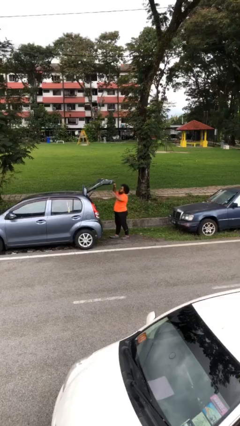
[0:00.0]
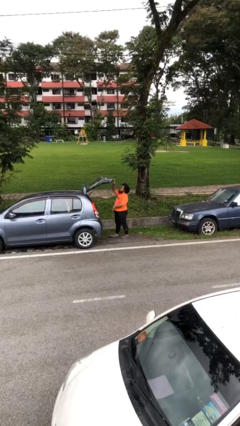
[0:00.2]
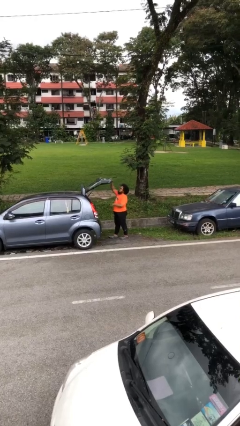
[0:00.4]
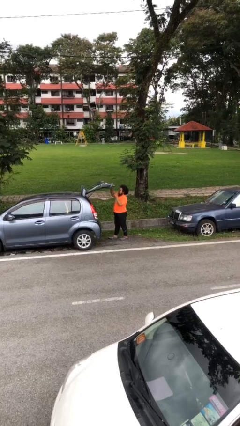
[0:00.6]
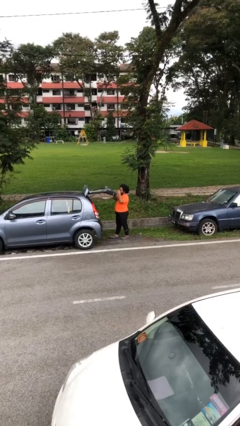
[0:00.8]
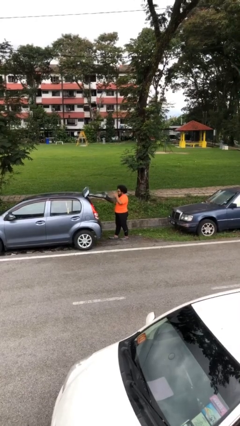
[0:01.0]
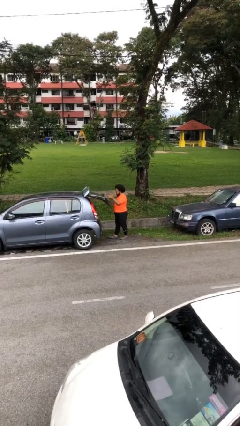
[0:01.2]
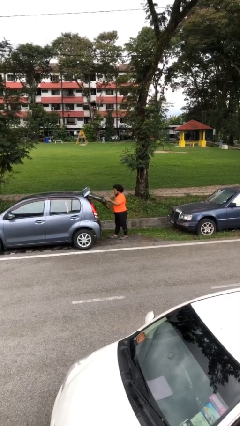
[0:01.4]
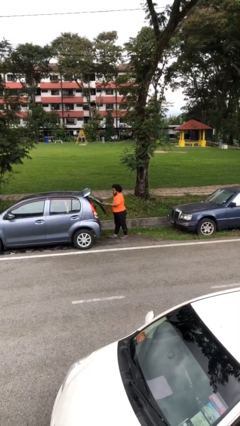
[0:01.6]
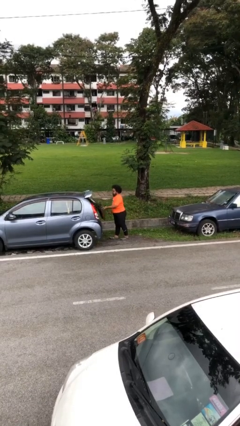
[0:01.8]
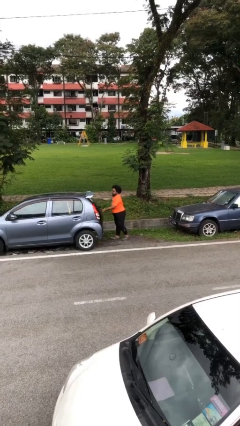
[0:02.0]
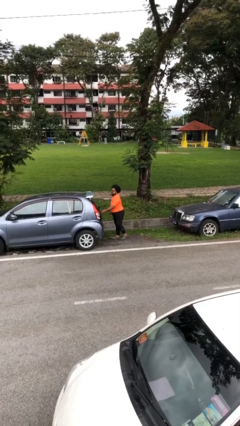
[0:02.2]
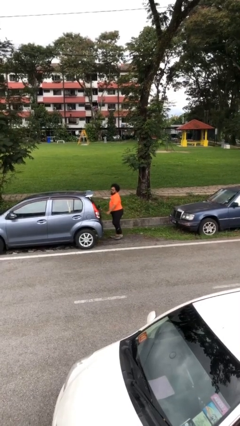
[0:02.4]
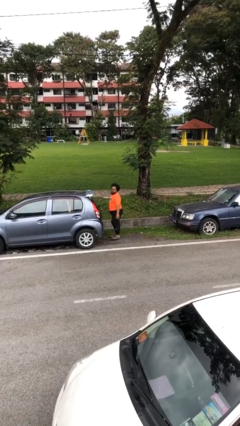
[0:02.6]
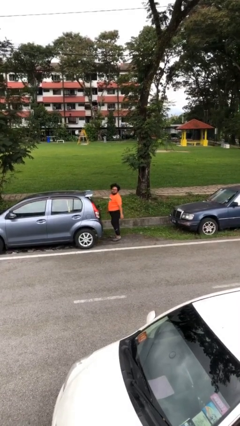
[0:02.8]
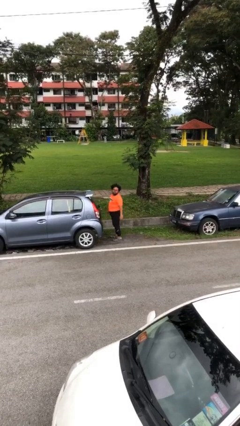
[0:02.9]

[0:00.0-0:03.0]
person closes car trunk

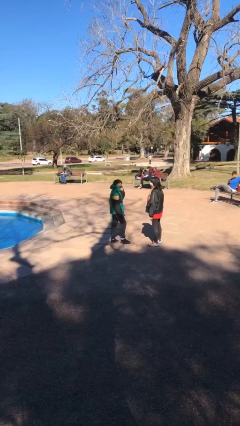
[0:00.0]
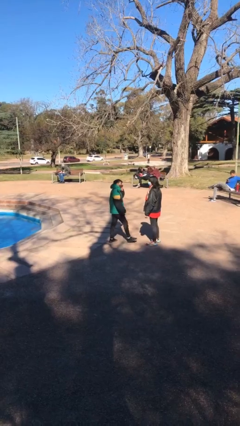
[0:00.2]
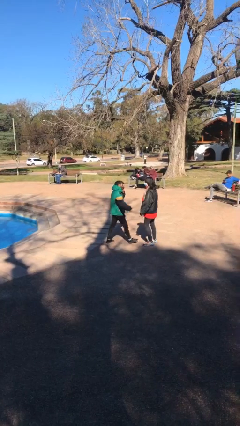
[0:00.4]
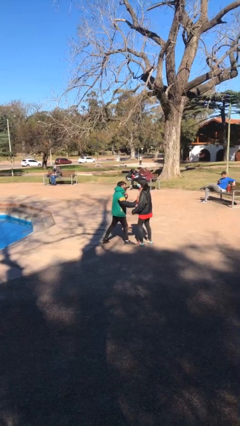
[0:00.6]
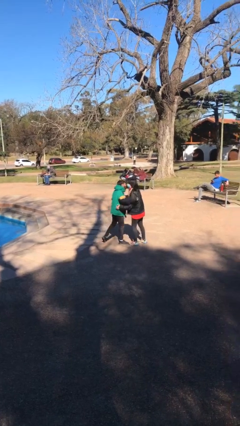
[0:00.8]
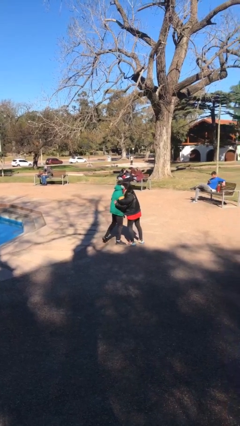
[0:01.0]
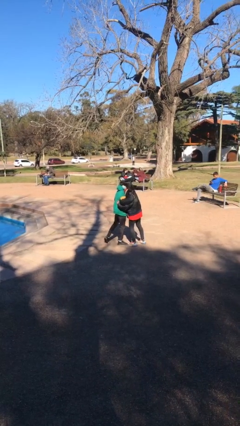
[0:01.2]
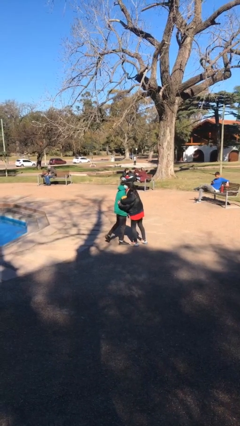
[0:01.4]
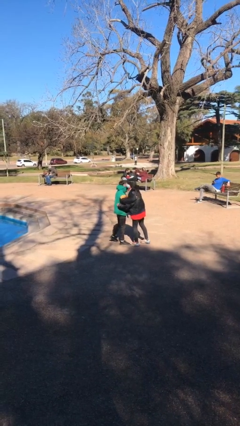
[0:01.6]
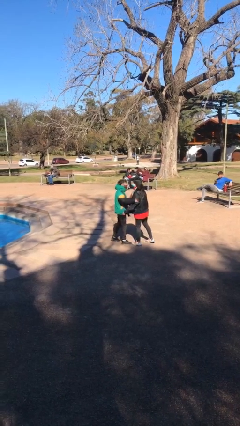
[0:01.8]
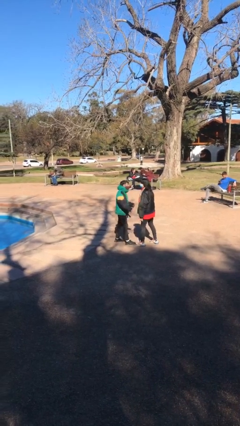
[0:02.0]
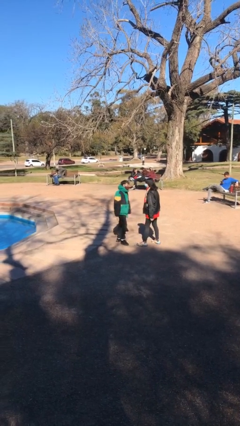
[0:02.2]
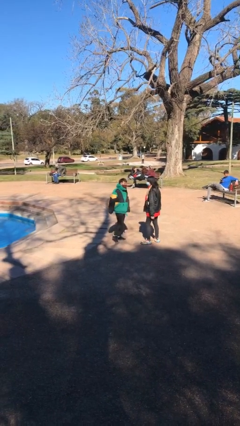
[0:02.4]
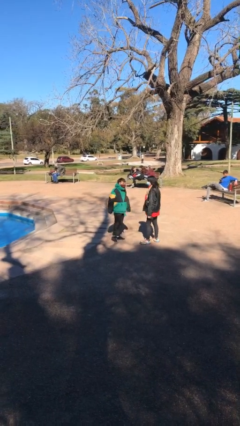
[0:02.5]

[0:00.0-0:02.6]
person kisses cheek of person

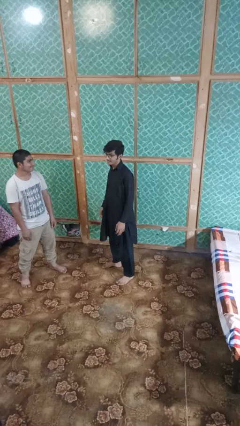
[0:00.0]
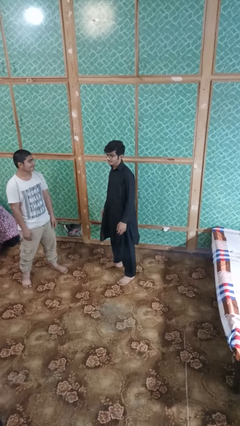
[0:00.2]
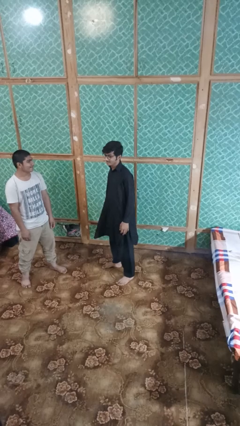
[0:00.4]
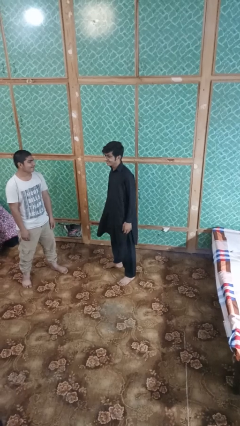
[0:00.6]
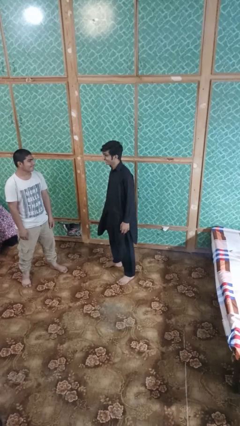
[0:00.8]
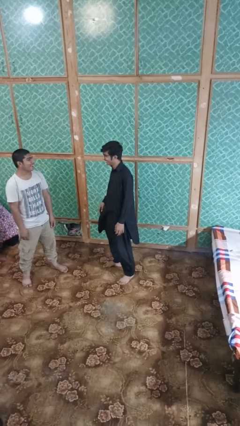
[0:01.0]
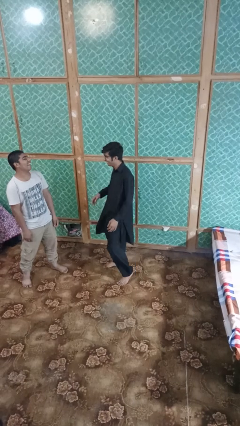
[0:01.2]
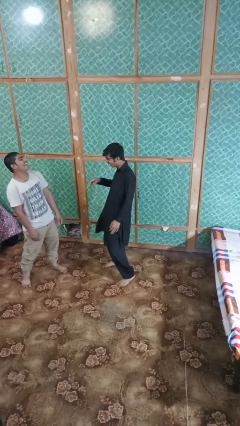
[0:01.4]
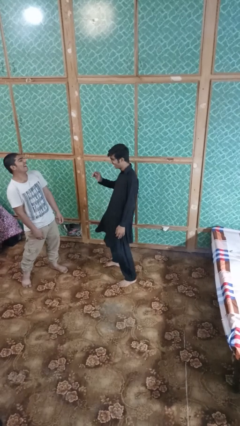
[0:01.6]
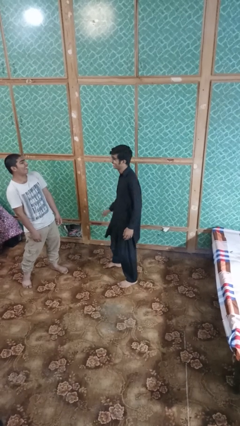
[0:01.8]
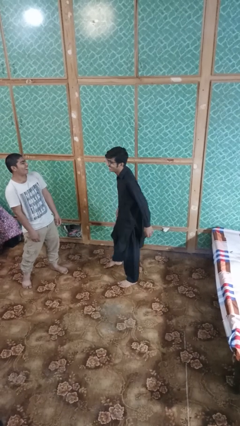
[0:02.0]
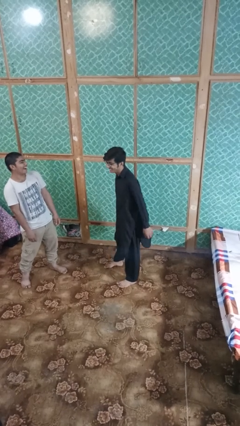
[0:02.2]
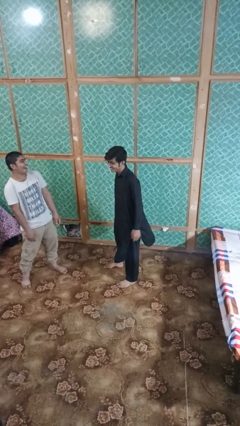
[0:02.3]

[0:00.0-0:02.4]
person laughs with person

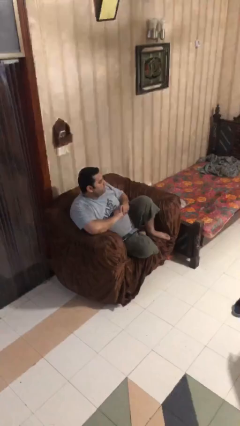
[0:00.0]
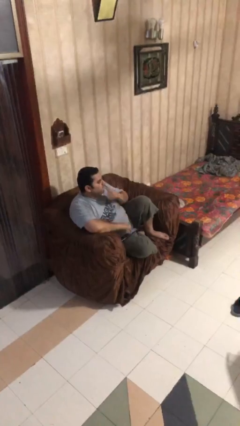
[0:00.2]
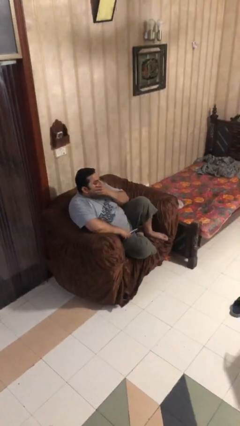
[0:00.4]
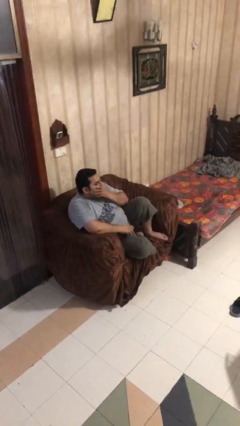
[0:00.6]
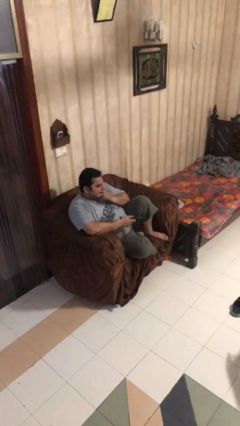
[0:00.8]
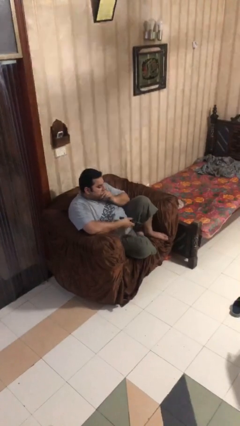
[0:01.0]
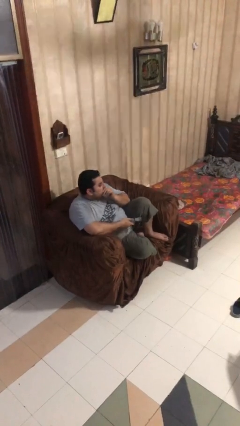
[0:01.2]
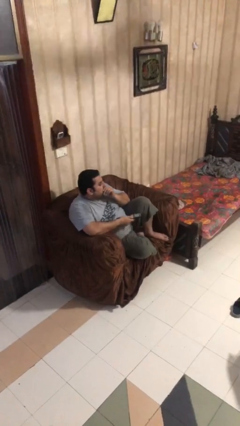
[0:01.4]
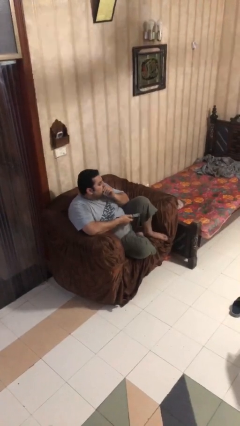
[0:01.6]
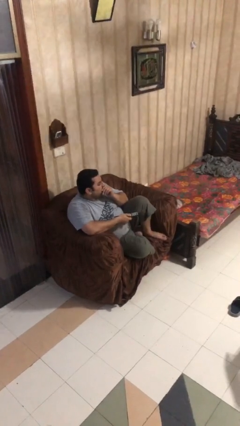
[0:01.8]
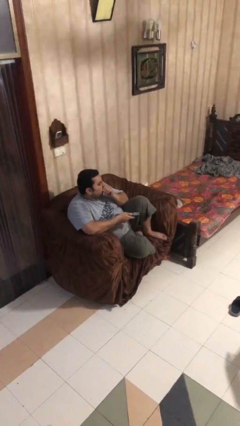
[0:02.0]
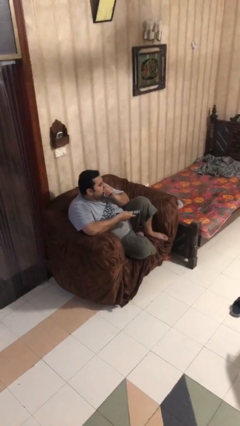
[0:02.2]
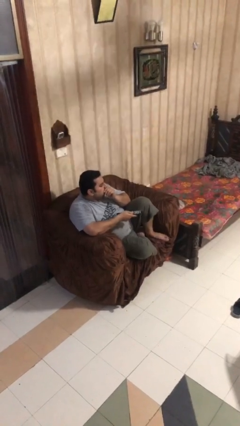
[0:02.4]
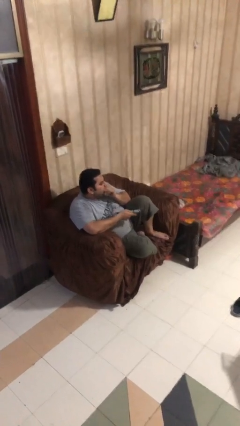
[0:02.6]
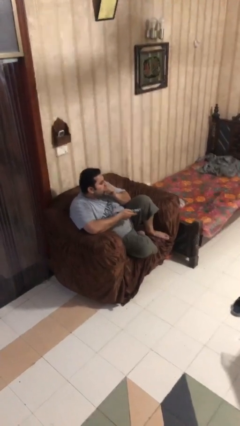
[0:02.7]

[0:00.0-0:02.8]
person uses television remote

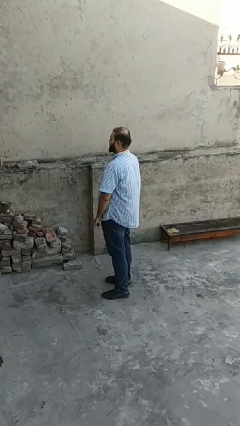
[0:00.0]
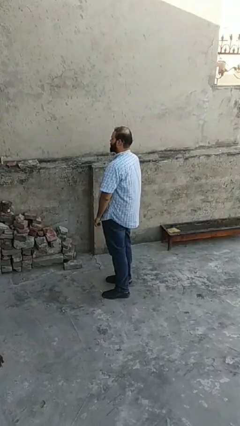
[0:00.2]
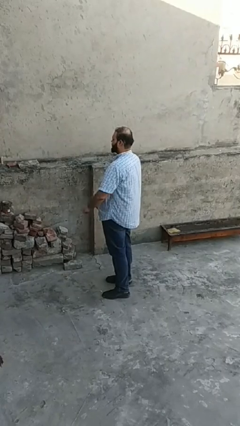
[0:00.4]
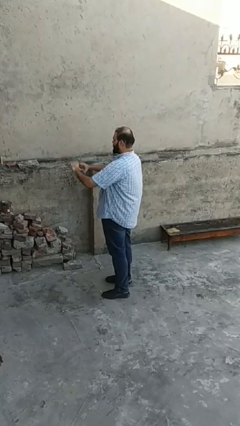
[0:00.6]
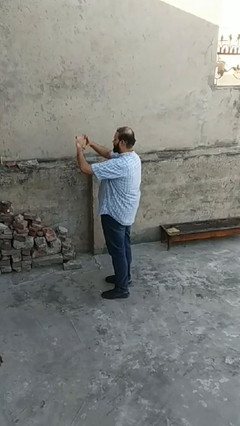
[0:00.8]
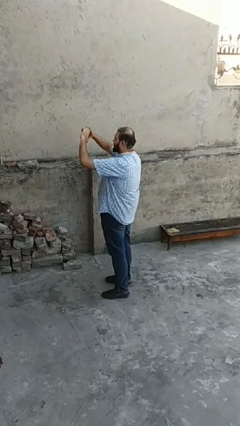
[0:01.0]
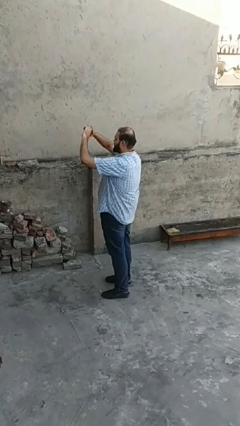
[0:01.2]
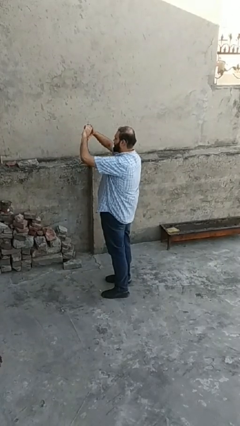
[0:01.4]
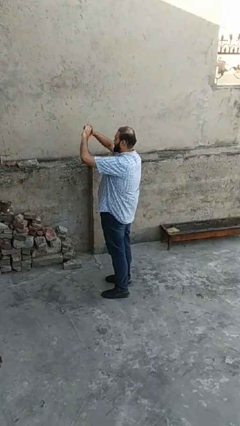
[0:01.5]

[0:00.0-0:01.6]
person gestures heart

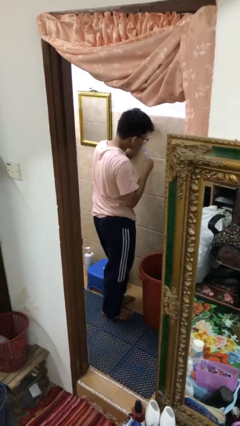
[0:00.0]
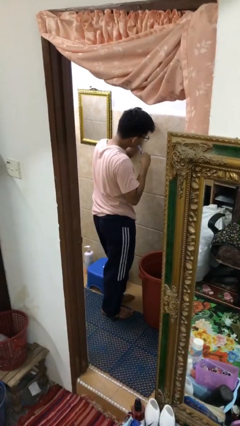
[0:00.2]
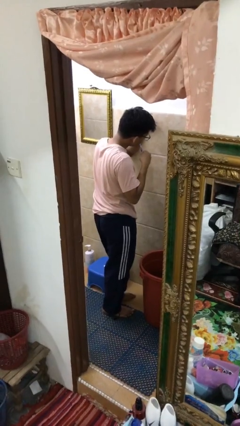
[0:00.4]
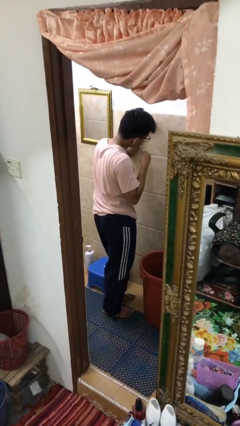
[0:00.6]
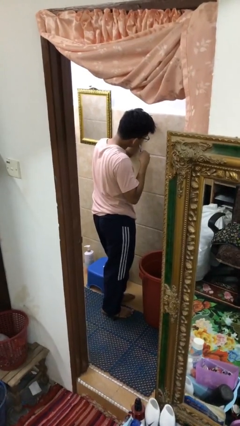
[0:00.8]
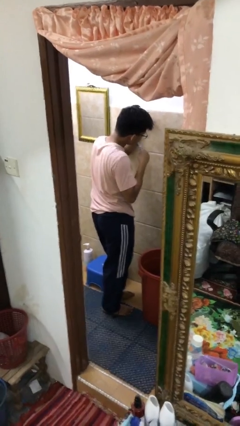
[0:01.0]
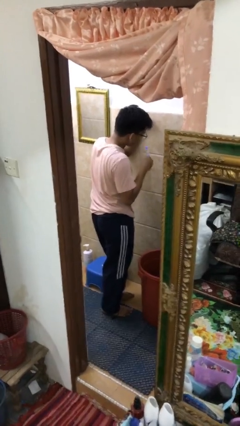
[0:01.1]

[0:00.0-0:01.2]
person brushes teeth

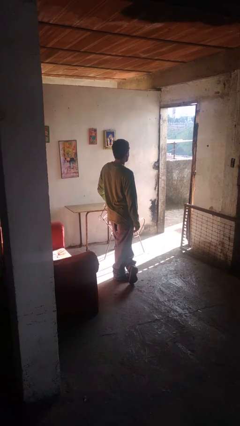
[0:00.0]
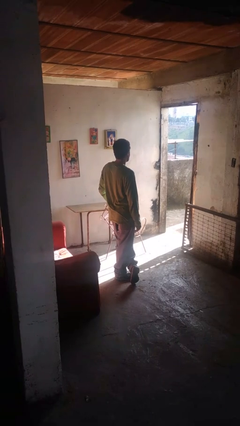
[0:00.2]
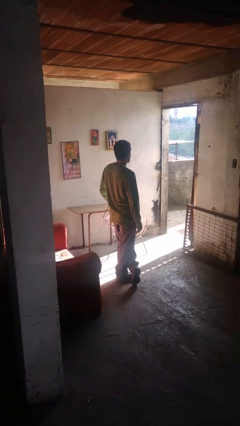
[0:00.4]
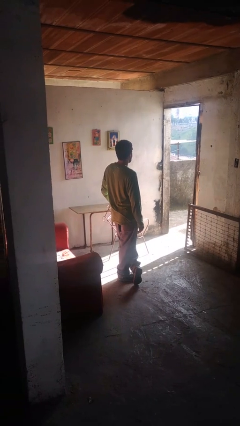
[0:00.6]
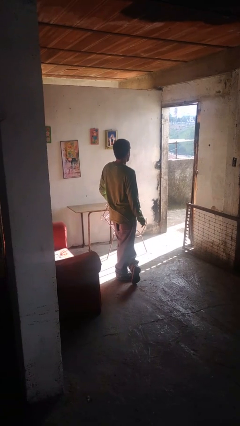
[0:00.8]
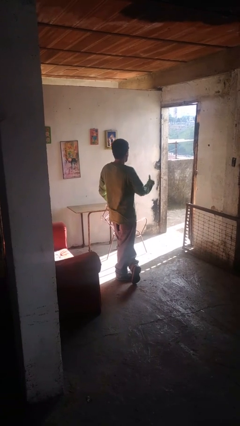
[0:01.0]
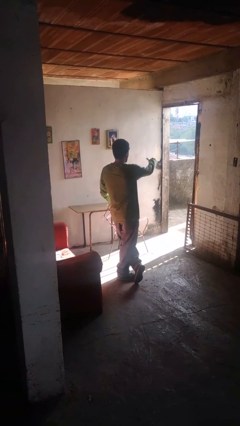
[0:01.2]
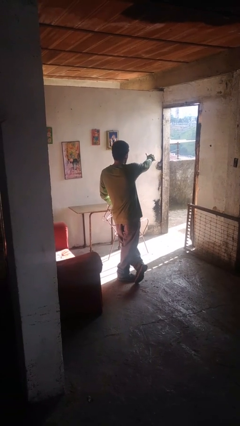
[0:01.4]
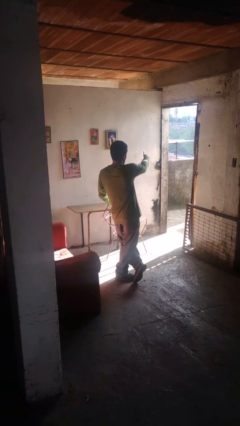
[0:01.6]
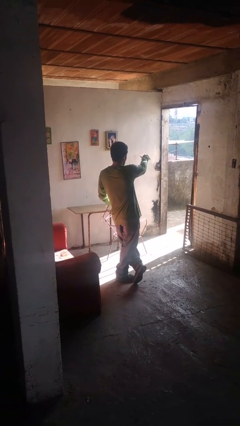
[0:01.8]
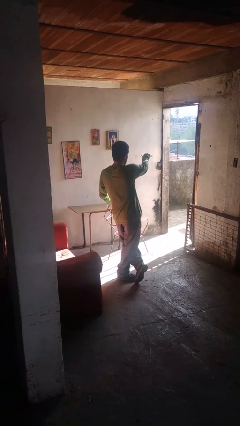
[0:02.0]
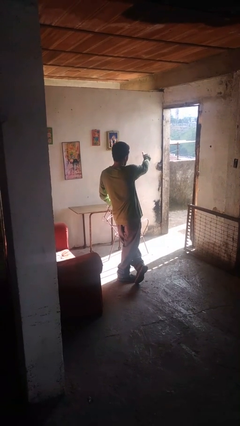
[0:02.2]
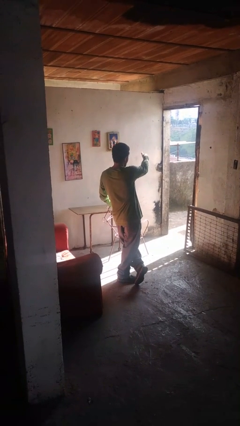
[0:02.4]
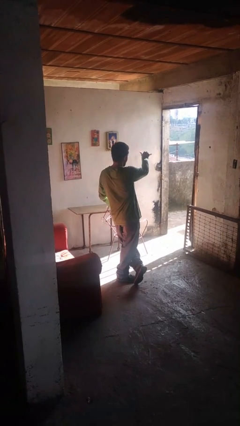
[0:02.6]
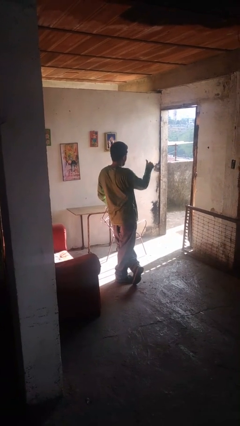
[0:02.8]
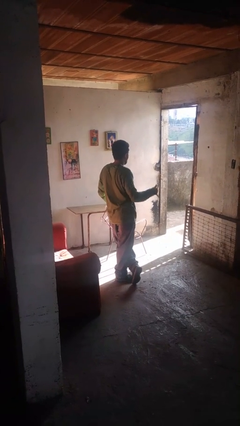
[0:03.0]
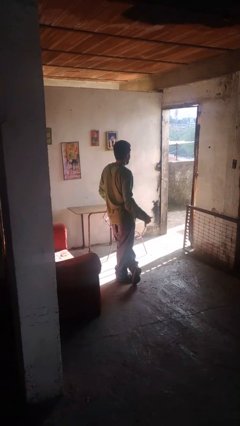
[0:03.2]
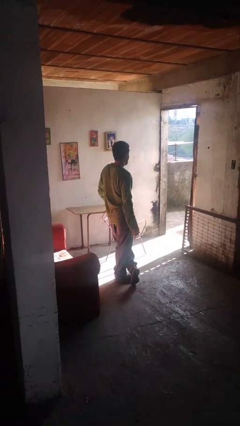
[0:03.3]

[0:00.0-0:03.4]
person gestures hang loose

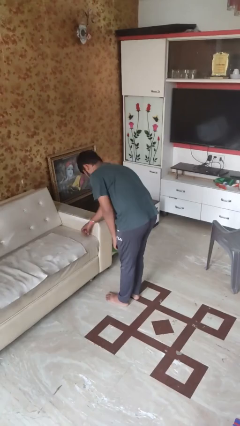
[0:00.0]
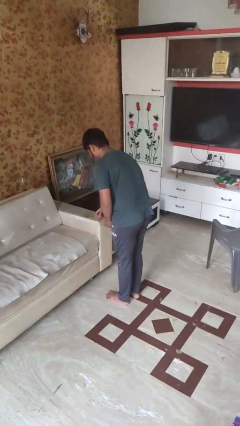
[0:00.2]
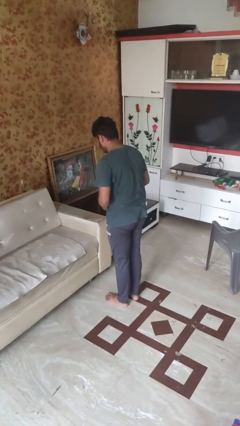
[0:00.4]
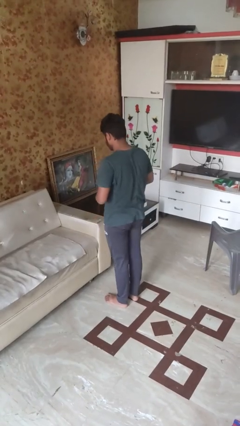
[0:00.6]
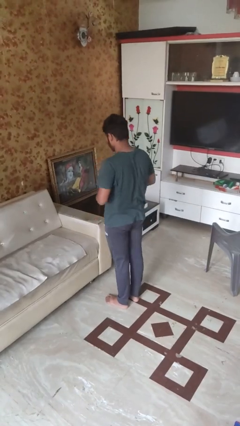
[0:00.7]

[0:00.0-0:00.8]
person picks up object from bed
